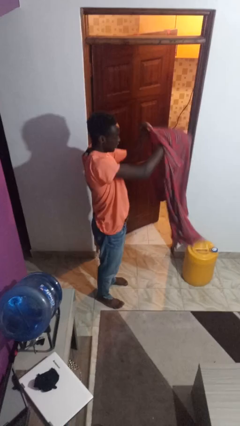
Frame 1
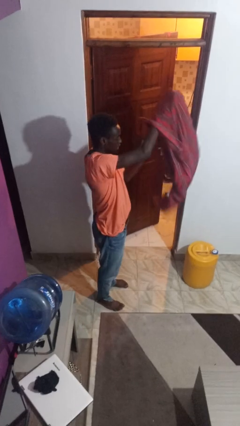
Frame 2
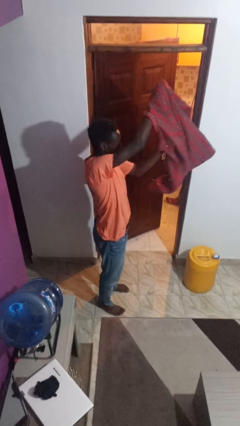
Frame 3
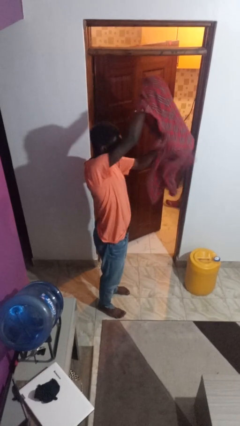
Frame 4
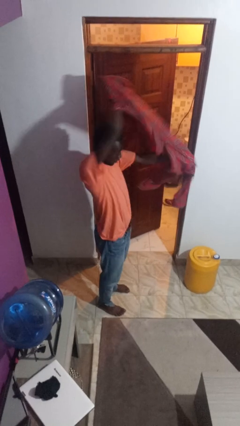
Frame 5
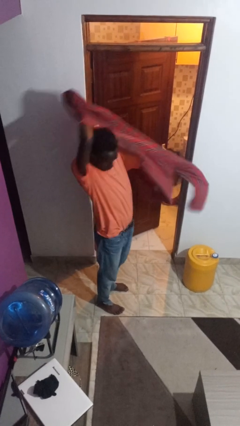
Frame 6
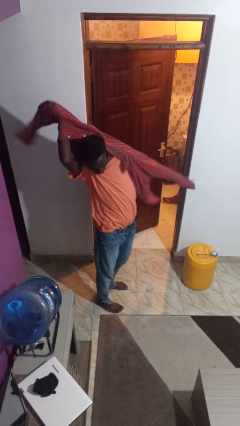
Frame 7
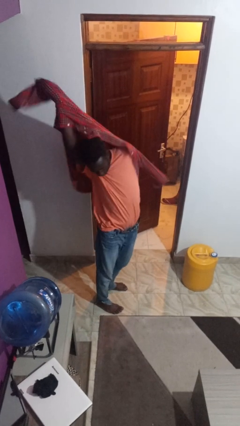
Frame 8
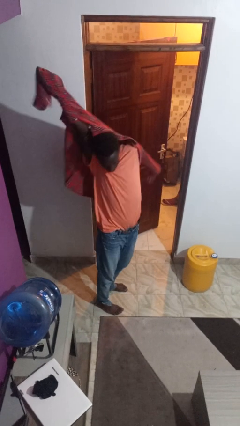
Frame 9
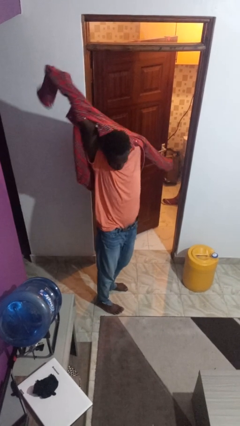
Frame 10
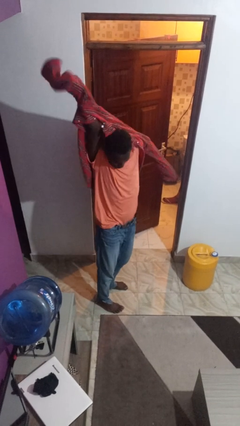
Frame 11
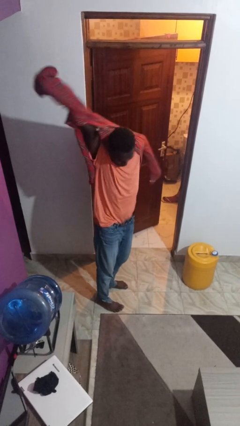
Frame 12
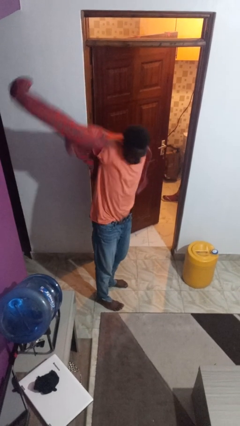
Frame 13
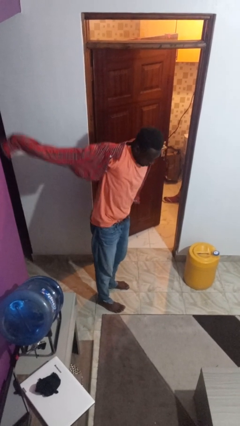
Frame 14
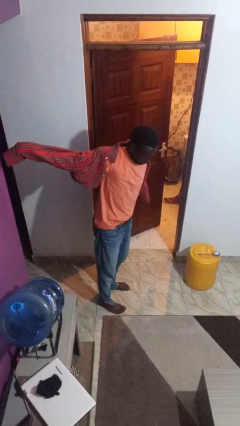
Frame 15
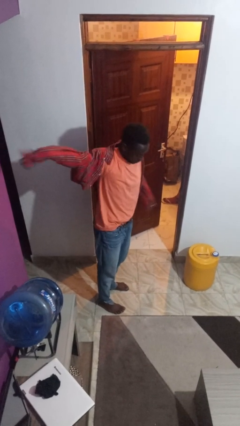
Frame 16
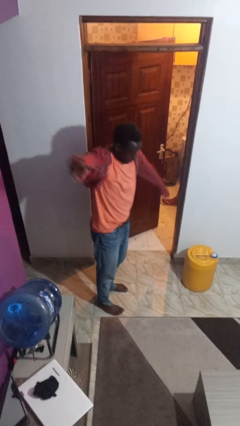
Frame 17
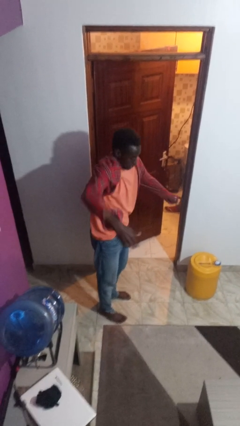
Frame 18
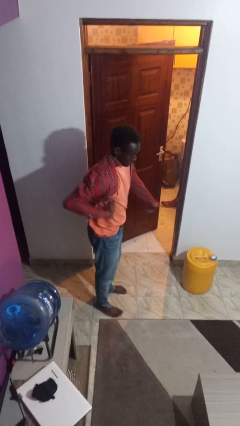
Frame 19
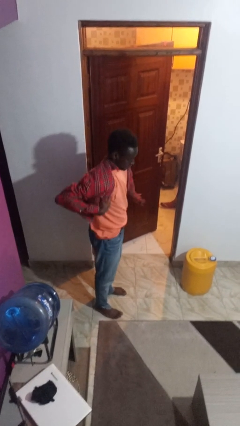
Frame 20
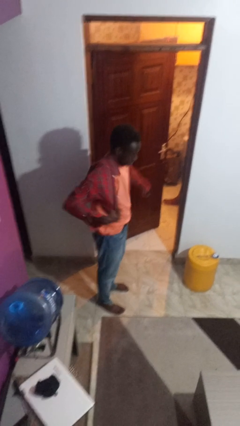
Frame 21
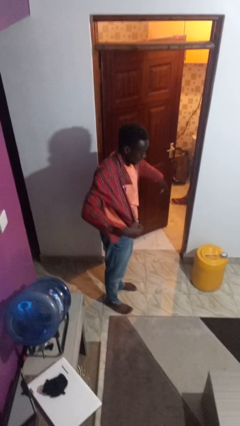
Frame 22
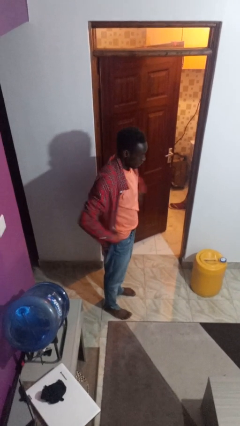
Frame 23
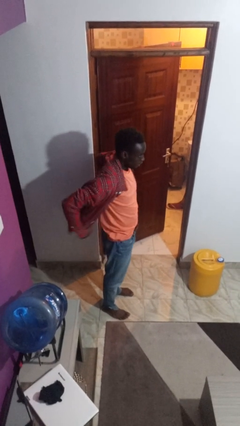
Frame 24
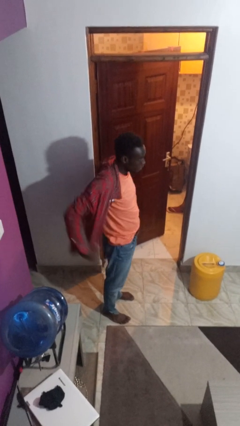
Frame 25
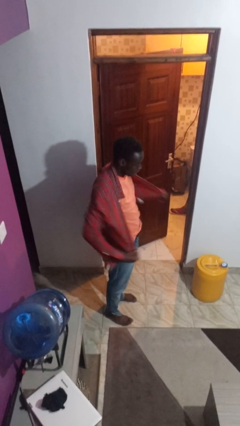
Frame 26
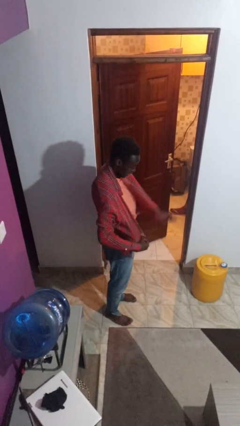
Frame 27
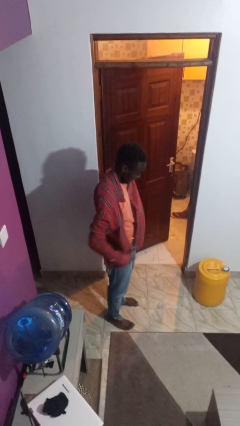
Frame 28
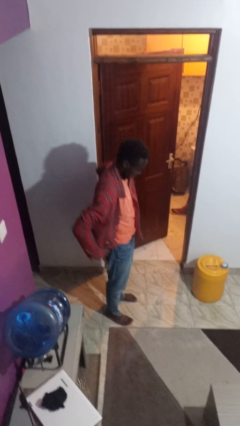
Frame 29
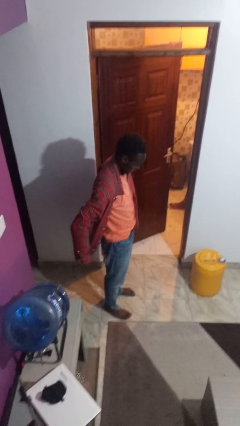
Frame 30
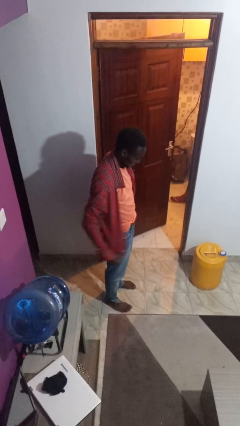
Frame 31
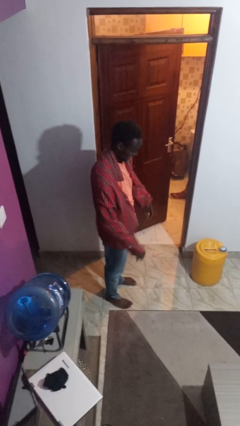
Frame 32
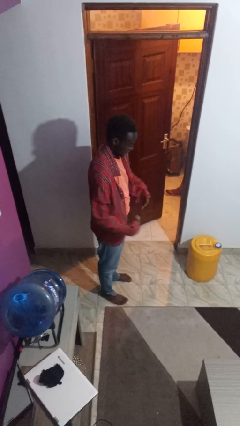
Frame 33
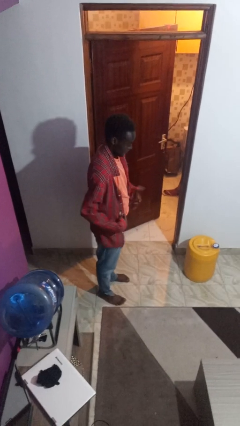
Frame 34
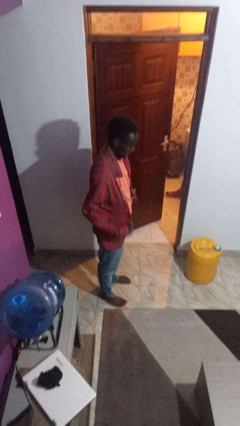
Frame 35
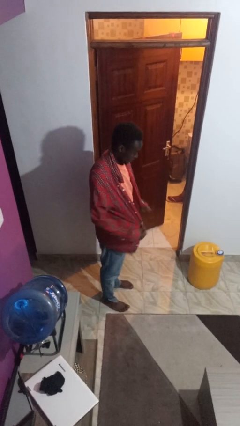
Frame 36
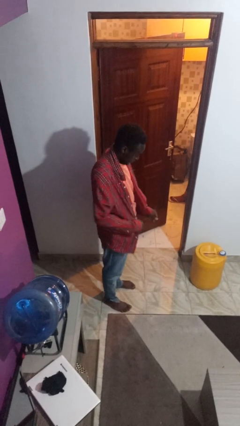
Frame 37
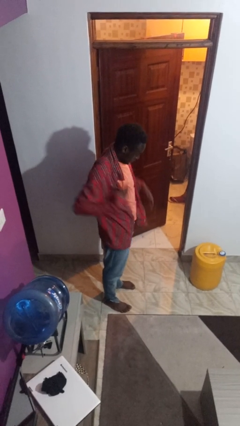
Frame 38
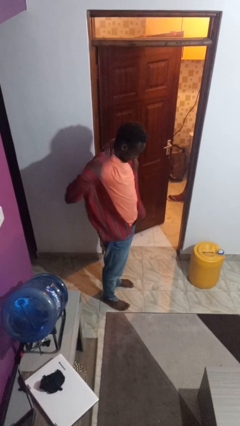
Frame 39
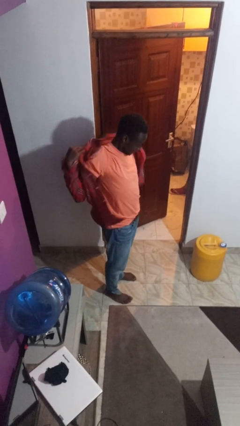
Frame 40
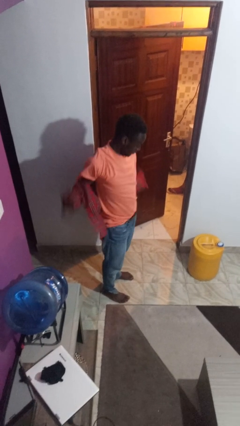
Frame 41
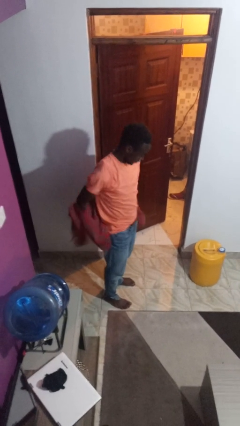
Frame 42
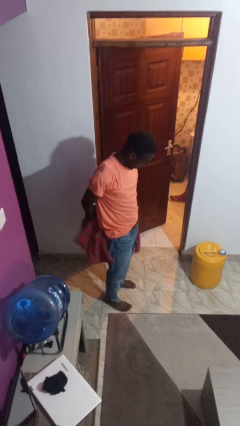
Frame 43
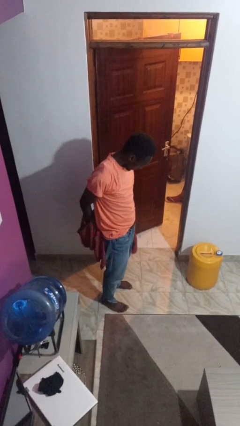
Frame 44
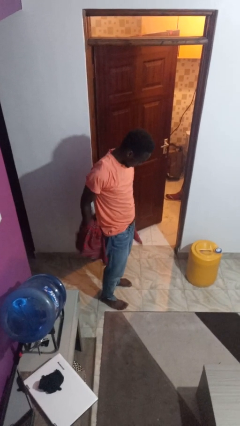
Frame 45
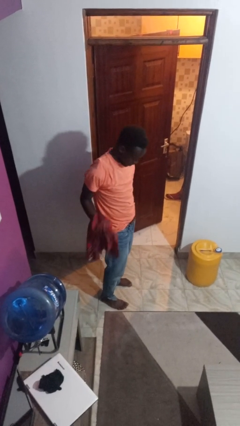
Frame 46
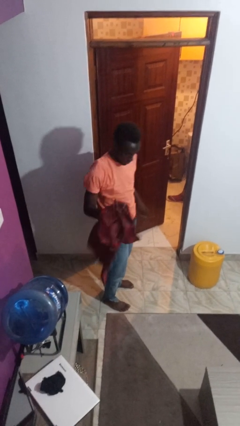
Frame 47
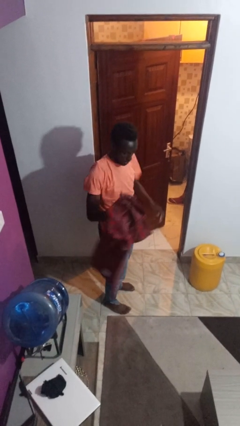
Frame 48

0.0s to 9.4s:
person puts on shirt

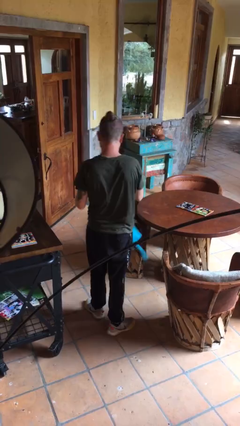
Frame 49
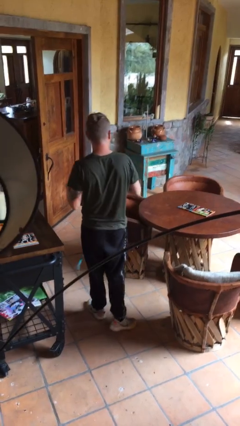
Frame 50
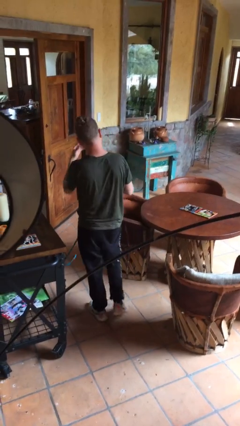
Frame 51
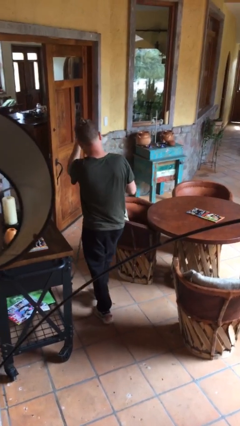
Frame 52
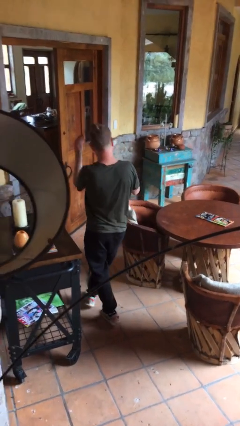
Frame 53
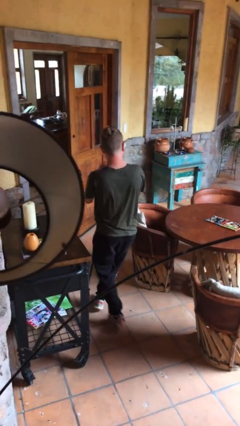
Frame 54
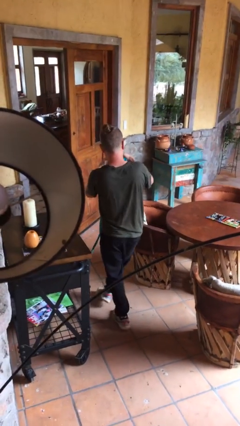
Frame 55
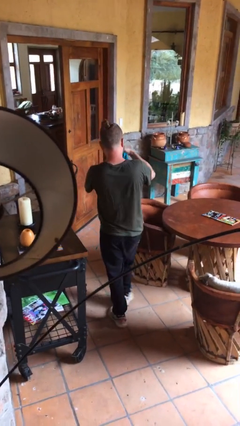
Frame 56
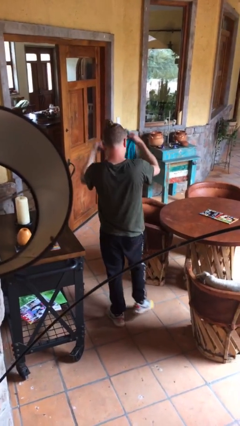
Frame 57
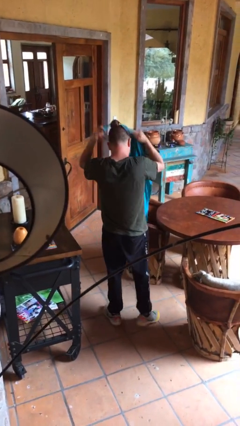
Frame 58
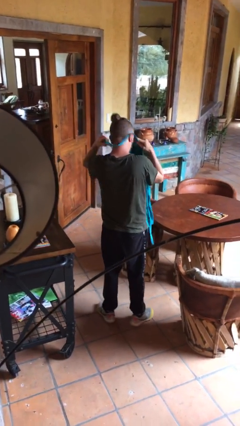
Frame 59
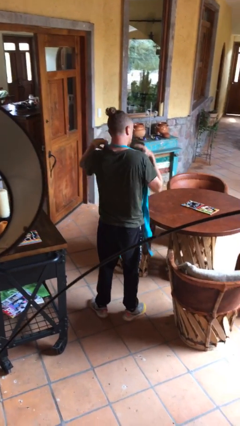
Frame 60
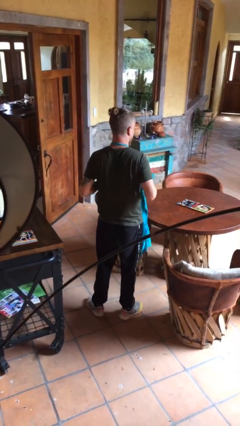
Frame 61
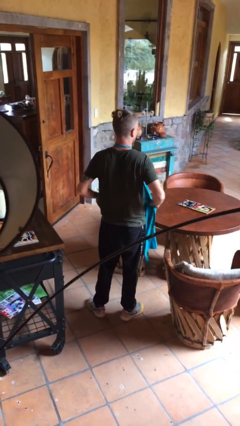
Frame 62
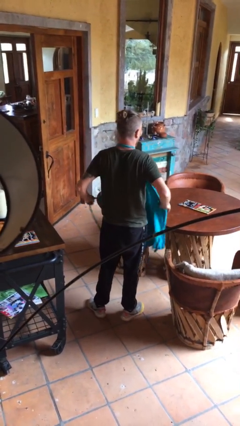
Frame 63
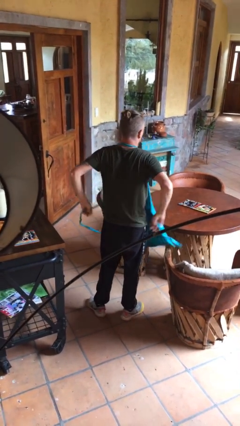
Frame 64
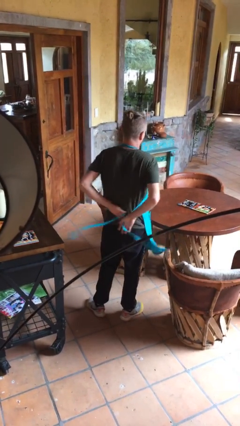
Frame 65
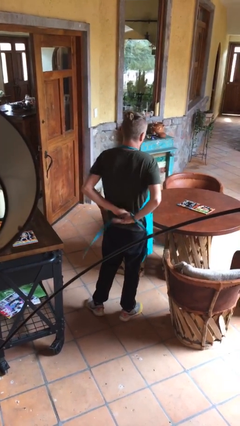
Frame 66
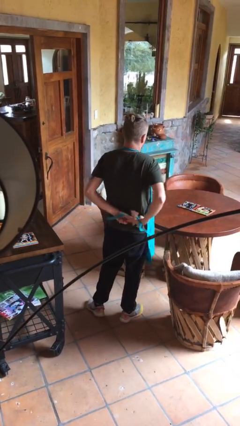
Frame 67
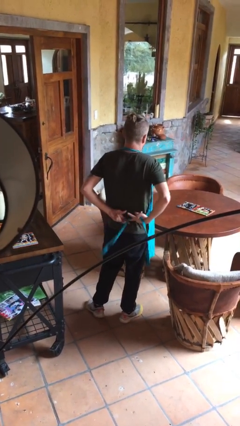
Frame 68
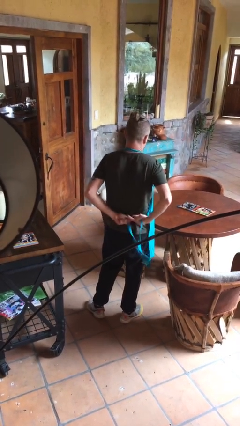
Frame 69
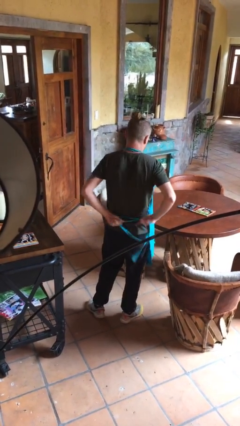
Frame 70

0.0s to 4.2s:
person puts on apron

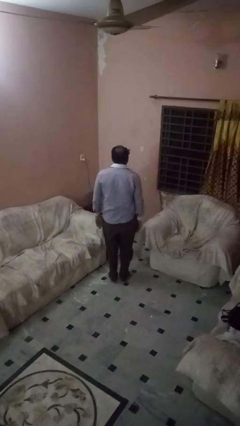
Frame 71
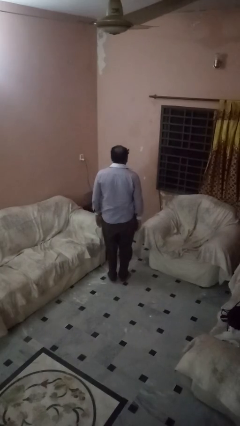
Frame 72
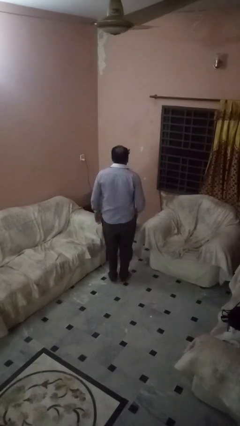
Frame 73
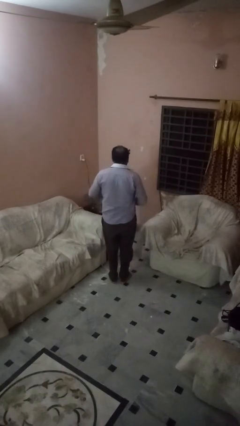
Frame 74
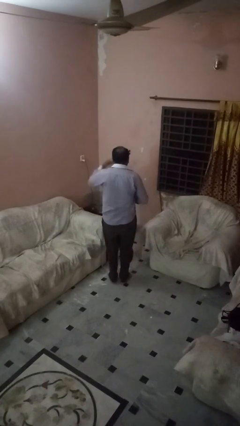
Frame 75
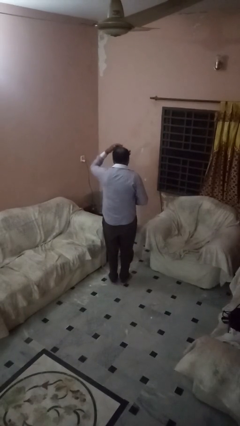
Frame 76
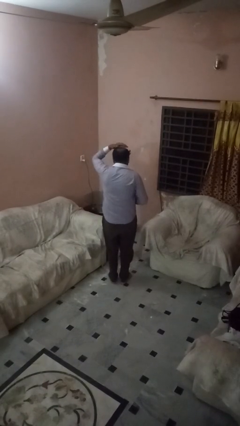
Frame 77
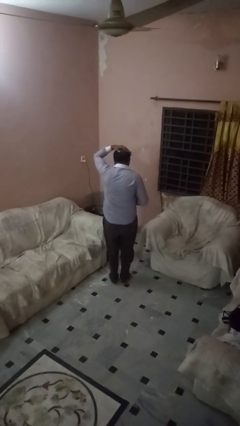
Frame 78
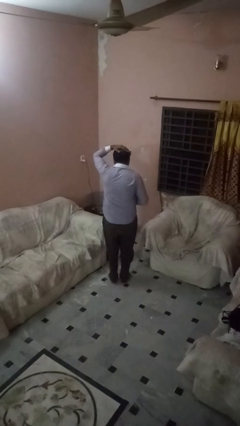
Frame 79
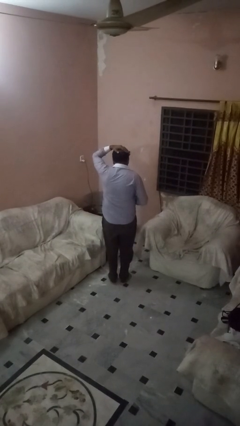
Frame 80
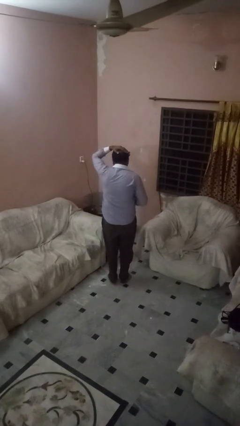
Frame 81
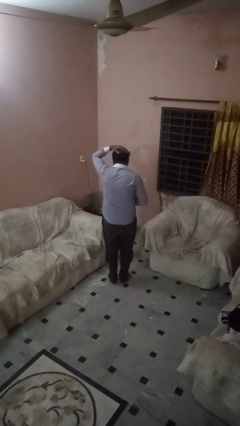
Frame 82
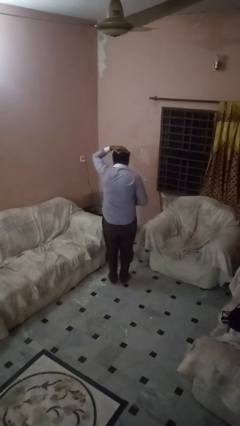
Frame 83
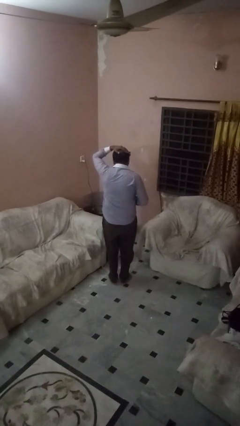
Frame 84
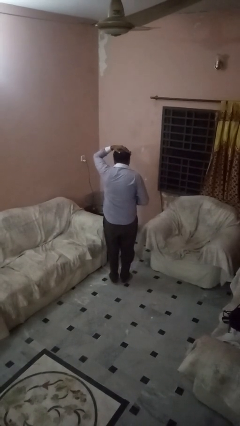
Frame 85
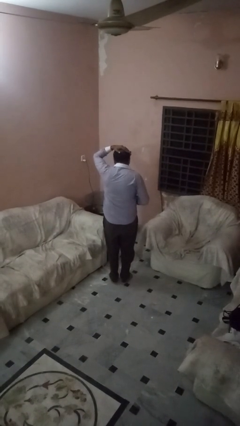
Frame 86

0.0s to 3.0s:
person pats head

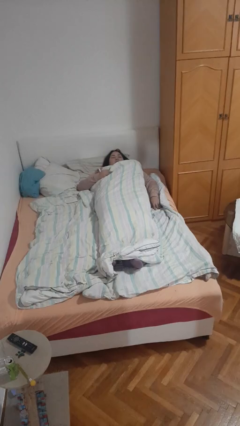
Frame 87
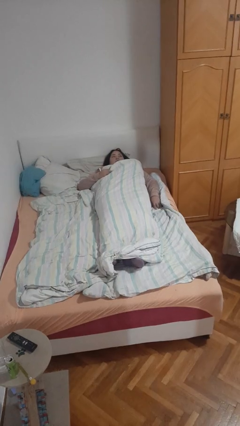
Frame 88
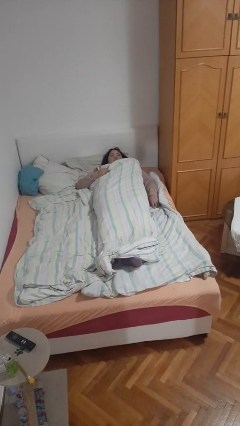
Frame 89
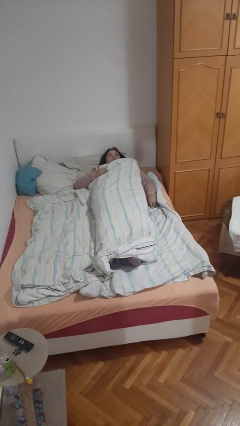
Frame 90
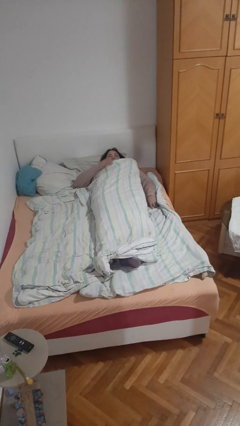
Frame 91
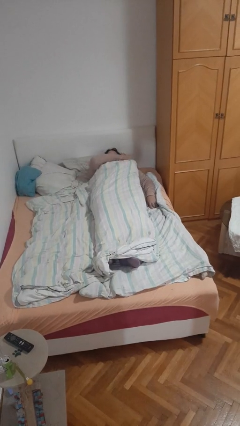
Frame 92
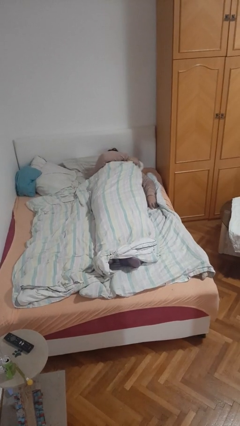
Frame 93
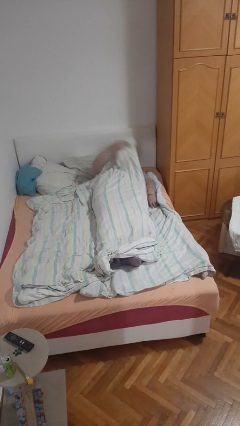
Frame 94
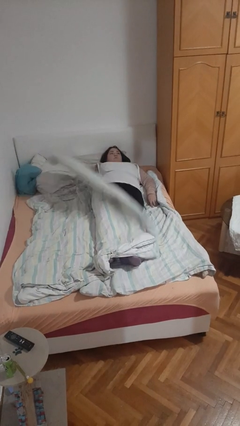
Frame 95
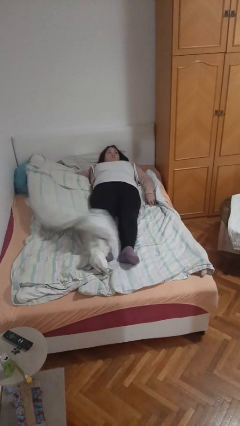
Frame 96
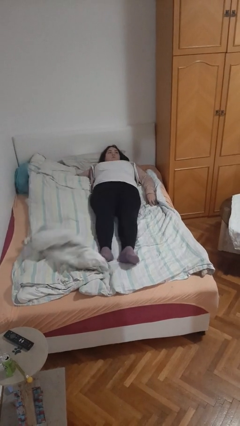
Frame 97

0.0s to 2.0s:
person uncovers with bedsheets
